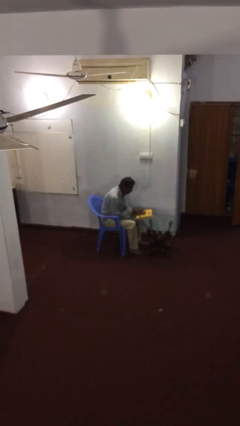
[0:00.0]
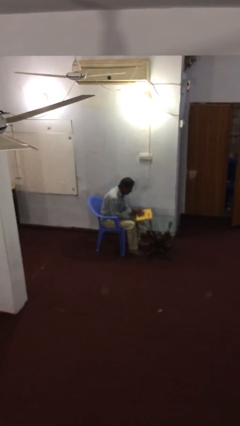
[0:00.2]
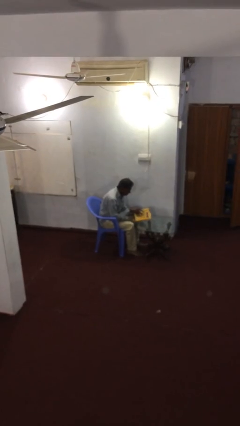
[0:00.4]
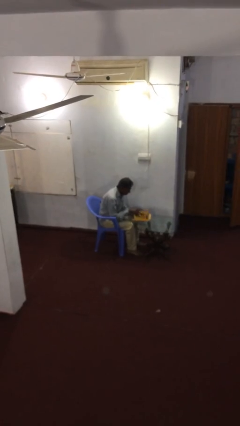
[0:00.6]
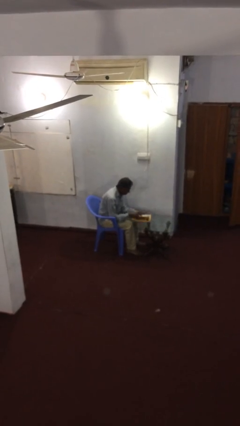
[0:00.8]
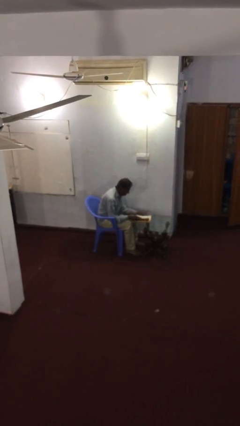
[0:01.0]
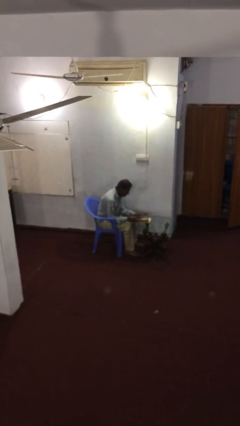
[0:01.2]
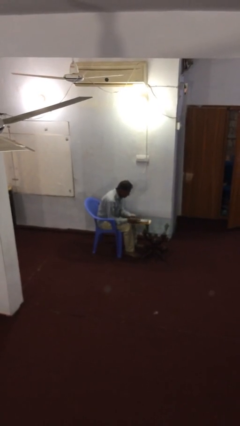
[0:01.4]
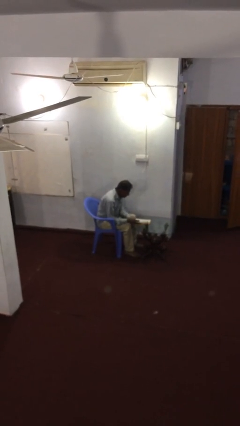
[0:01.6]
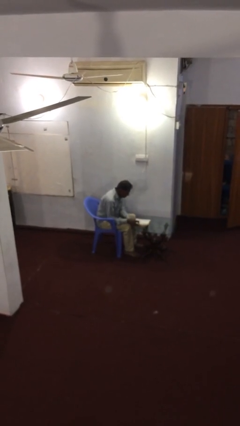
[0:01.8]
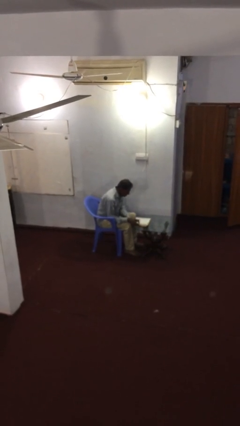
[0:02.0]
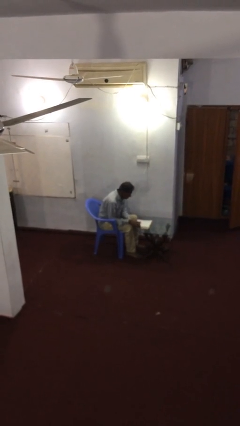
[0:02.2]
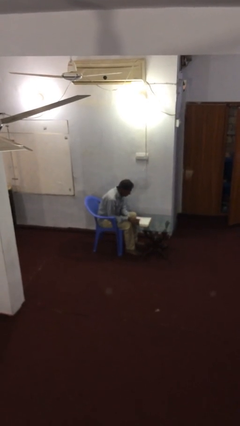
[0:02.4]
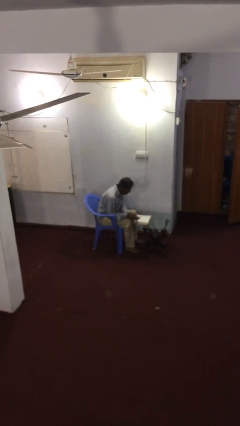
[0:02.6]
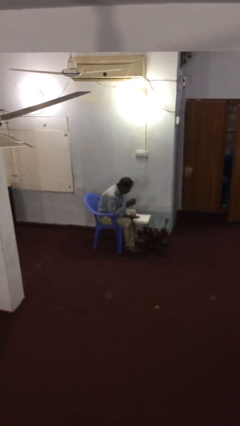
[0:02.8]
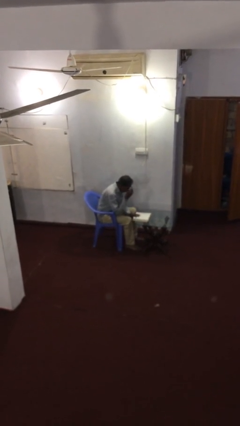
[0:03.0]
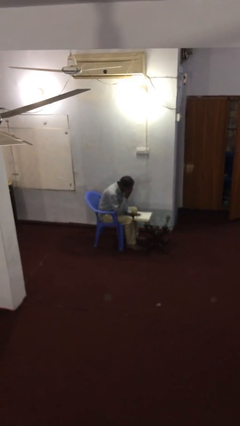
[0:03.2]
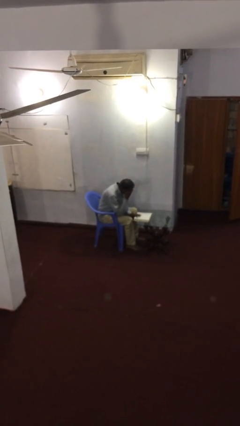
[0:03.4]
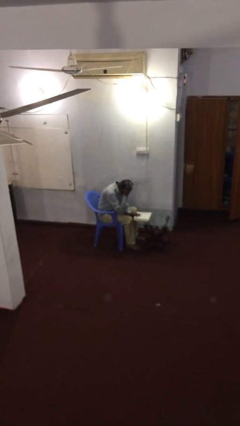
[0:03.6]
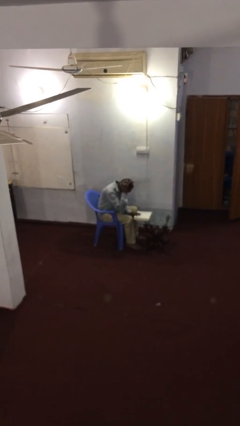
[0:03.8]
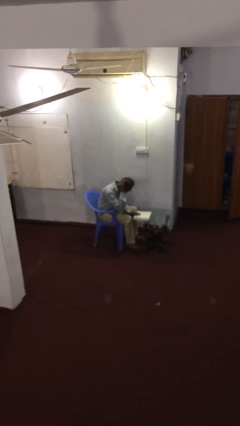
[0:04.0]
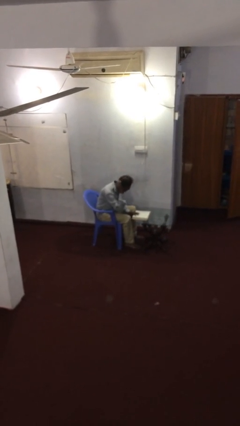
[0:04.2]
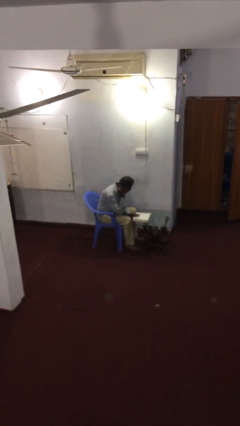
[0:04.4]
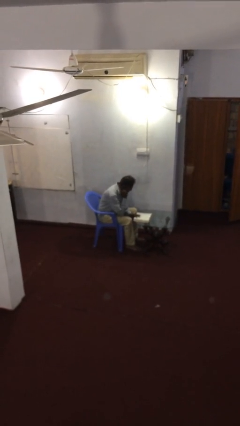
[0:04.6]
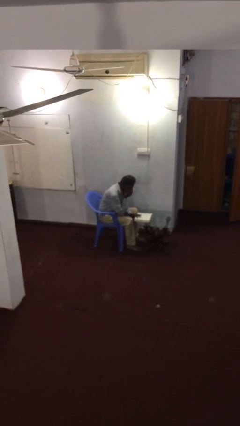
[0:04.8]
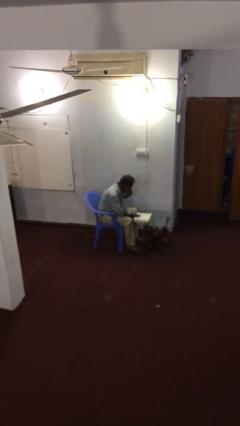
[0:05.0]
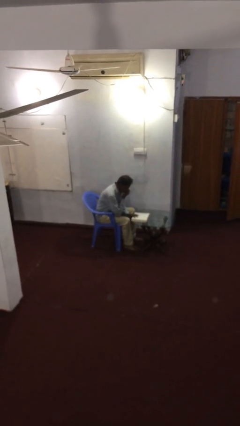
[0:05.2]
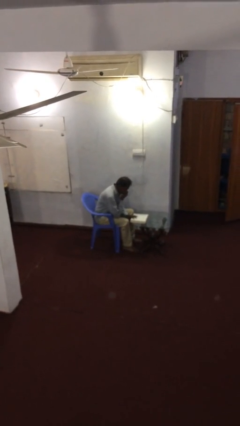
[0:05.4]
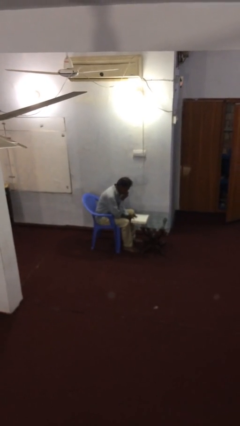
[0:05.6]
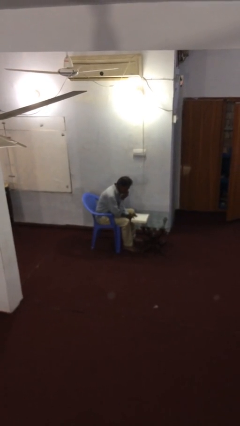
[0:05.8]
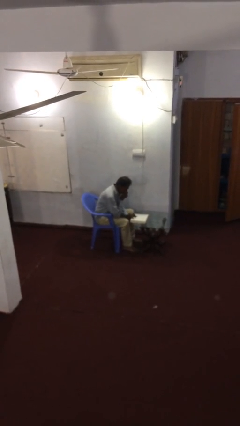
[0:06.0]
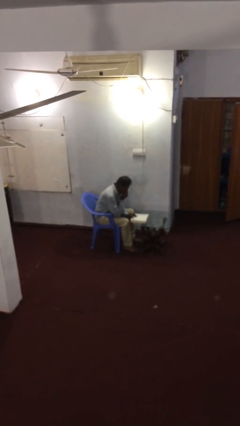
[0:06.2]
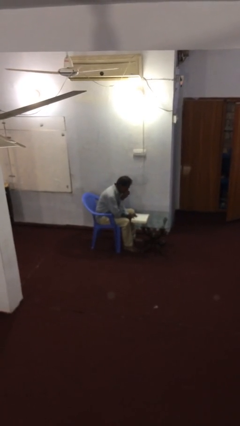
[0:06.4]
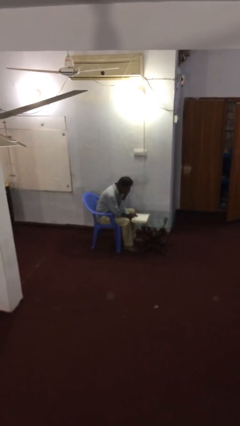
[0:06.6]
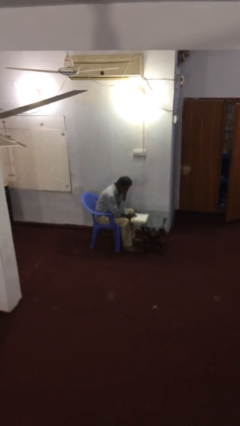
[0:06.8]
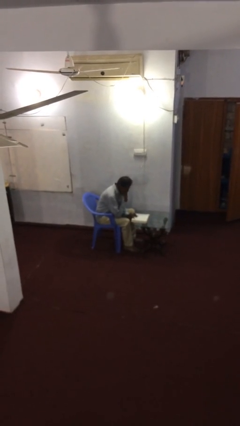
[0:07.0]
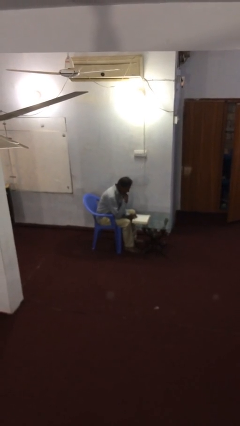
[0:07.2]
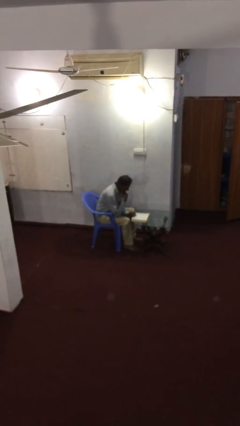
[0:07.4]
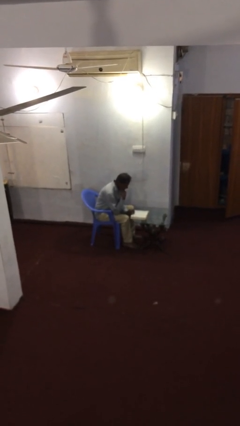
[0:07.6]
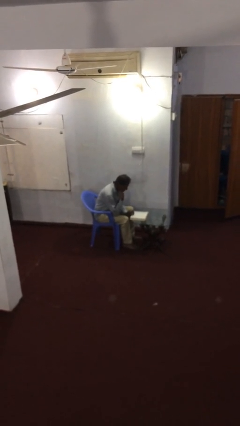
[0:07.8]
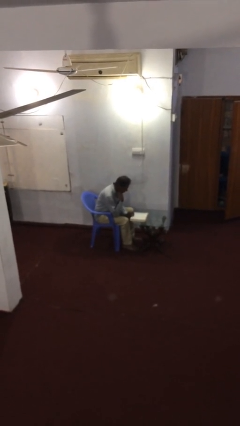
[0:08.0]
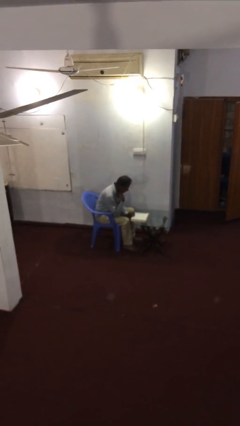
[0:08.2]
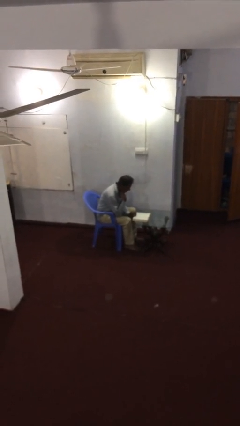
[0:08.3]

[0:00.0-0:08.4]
person reads document

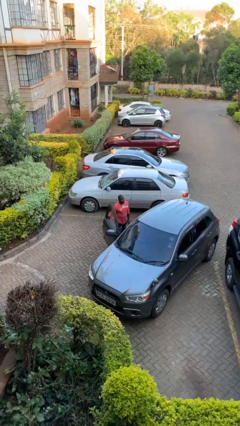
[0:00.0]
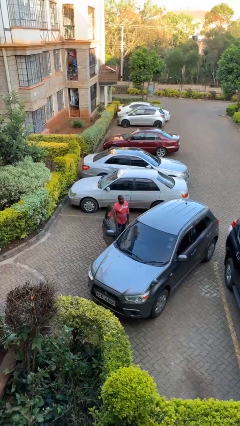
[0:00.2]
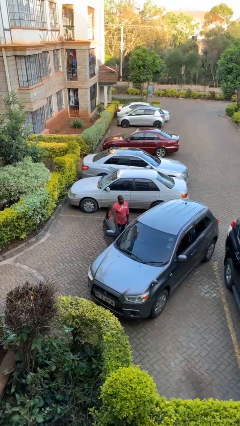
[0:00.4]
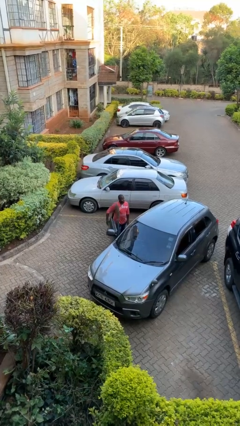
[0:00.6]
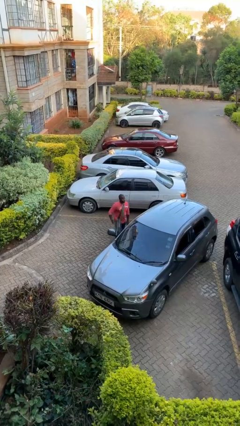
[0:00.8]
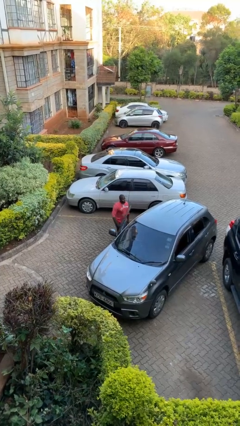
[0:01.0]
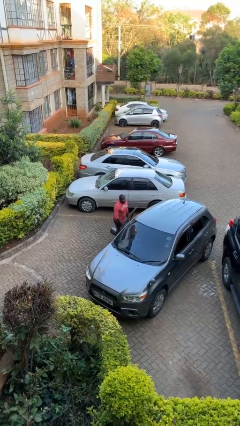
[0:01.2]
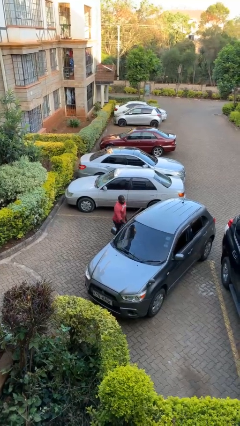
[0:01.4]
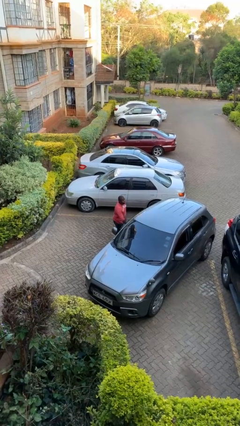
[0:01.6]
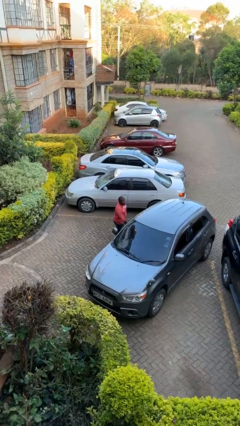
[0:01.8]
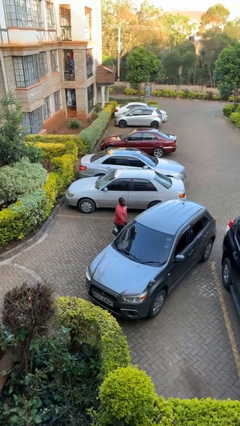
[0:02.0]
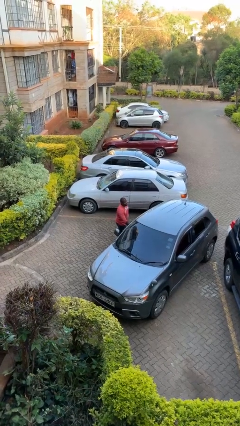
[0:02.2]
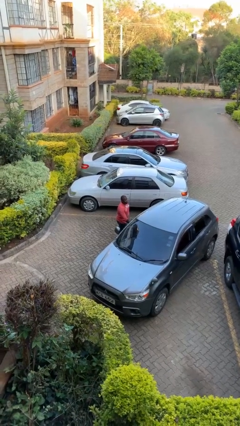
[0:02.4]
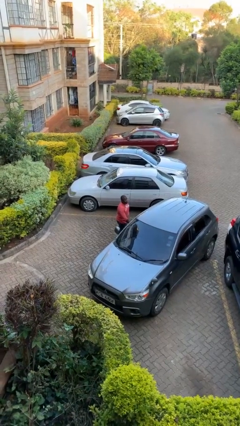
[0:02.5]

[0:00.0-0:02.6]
person closes car door

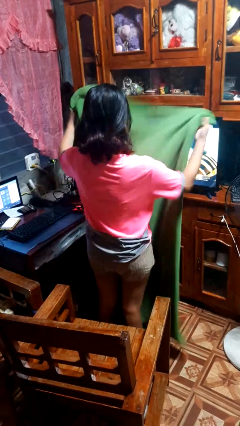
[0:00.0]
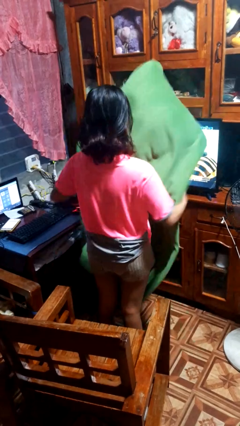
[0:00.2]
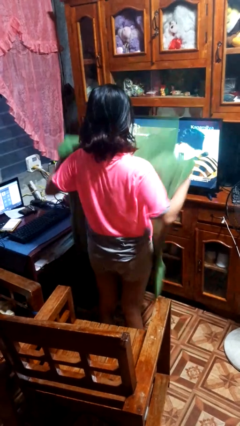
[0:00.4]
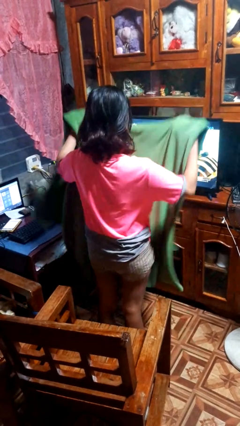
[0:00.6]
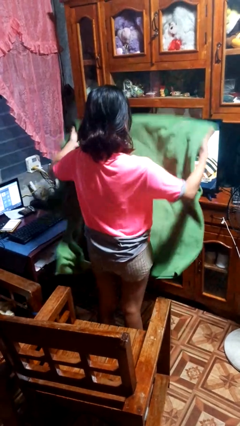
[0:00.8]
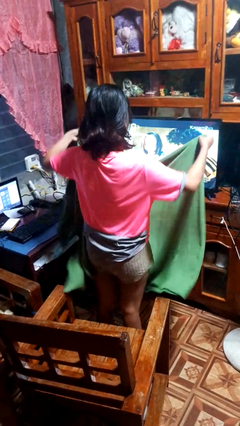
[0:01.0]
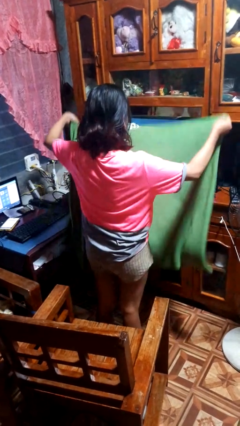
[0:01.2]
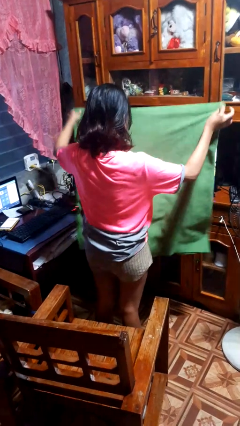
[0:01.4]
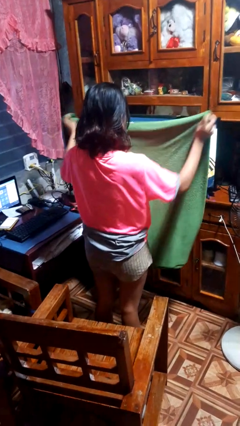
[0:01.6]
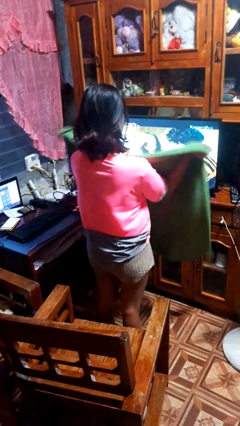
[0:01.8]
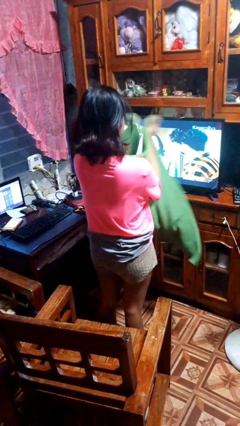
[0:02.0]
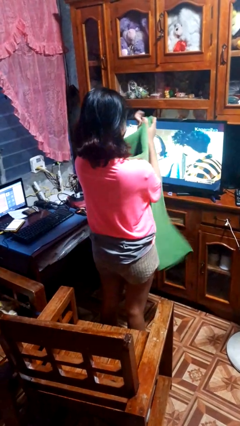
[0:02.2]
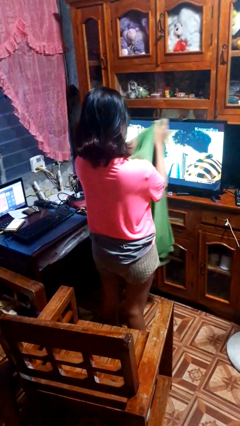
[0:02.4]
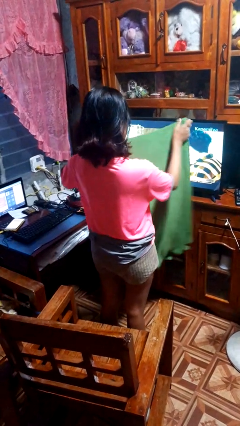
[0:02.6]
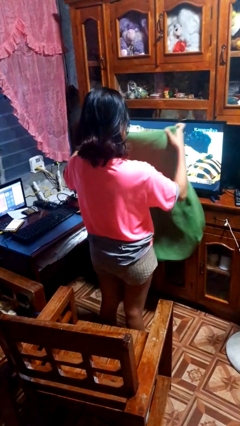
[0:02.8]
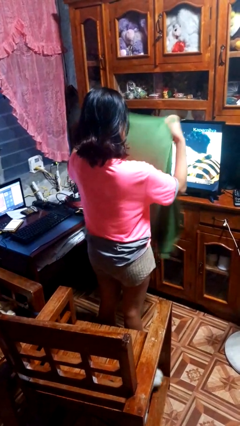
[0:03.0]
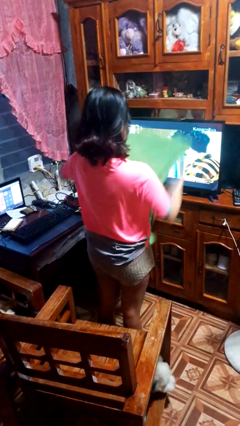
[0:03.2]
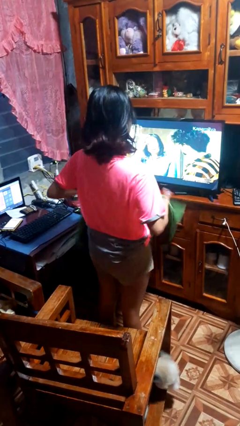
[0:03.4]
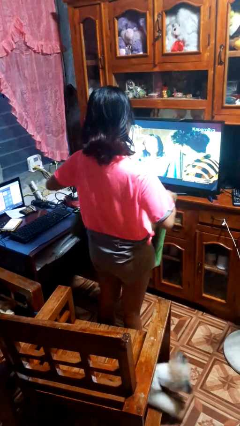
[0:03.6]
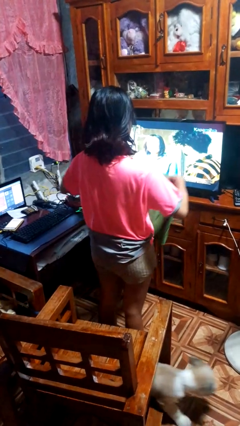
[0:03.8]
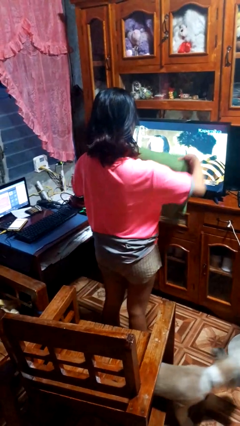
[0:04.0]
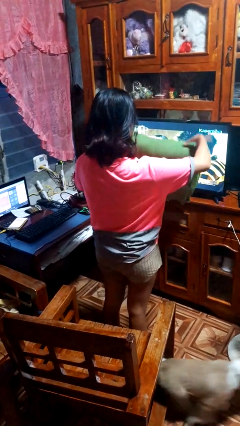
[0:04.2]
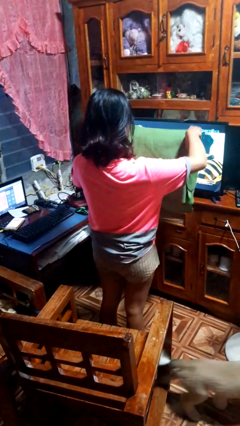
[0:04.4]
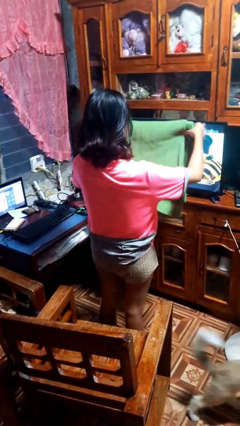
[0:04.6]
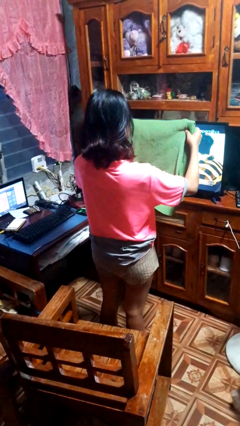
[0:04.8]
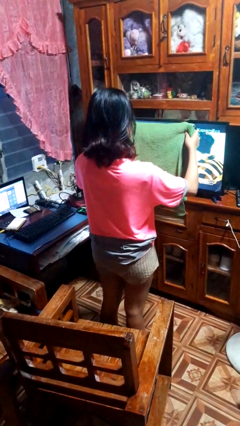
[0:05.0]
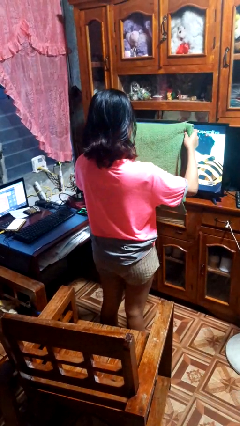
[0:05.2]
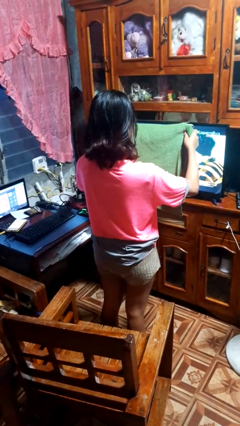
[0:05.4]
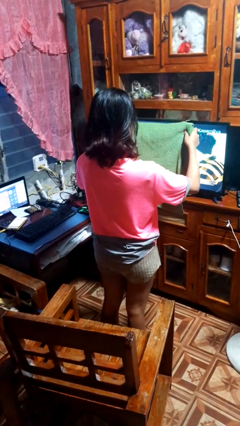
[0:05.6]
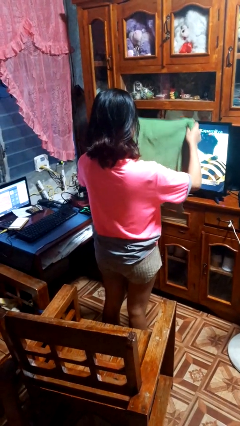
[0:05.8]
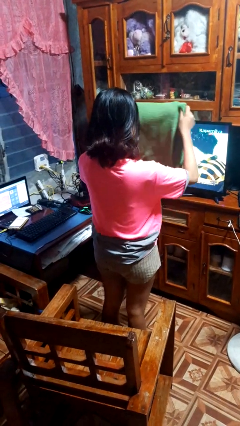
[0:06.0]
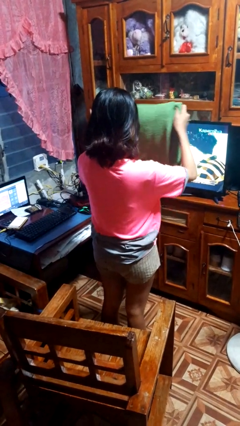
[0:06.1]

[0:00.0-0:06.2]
person folds blanket

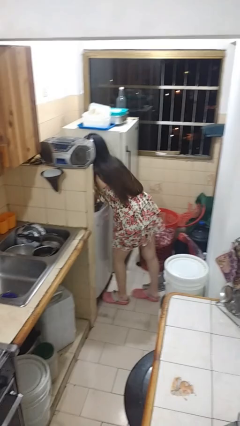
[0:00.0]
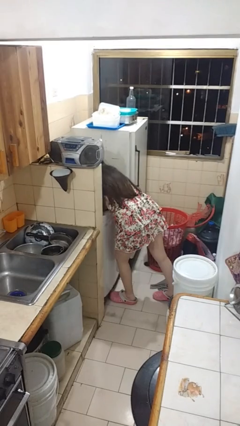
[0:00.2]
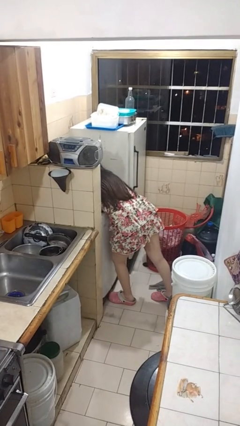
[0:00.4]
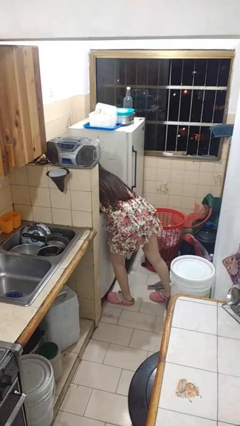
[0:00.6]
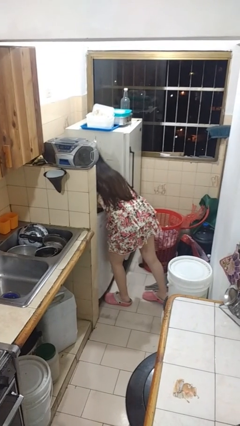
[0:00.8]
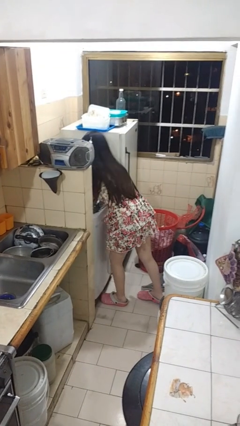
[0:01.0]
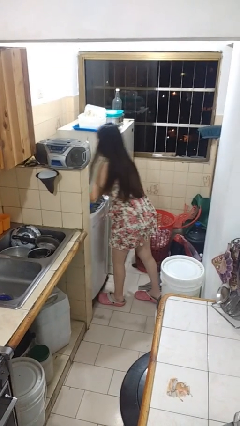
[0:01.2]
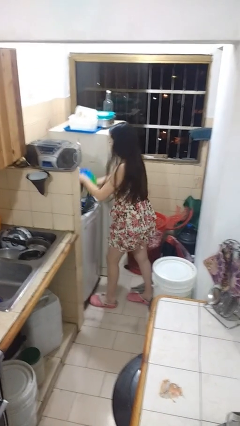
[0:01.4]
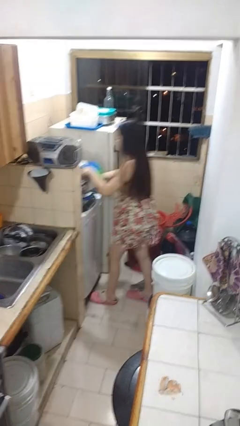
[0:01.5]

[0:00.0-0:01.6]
person unloads clotheswasher
